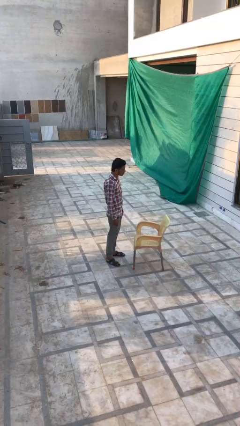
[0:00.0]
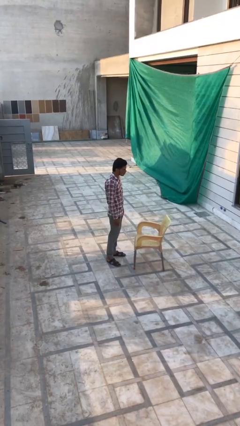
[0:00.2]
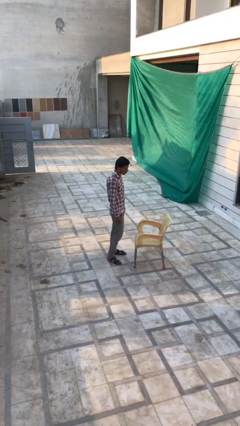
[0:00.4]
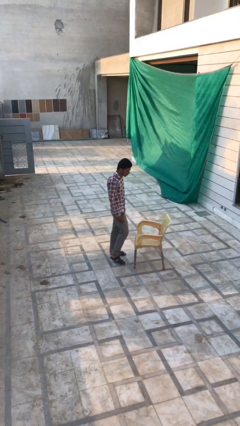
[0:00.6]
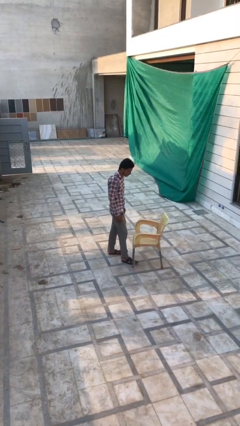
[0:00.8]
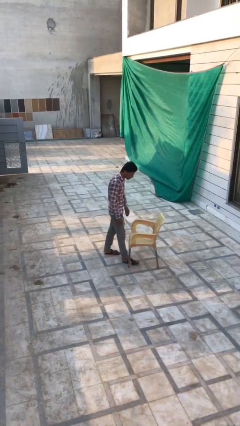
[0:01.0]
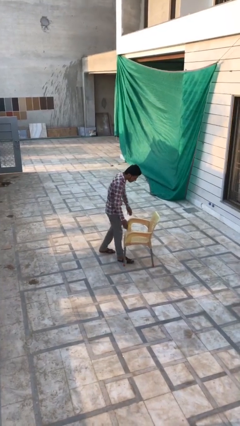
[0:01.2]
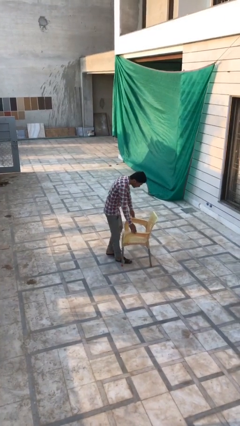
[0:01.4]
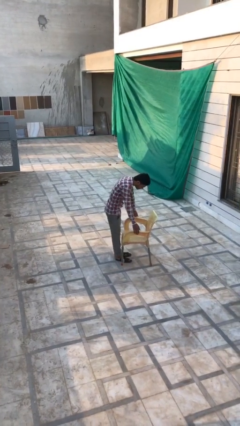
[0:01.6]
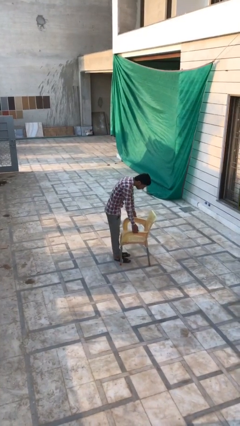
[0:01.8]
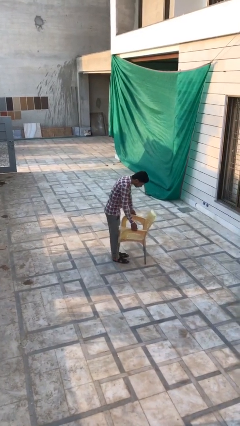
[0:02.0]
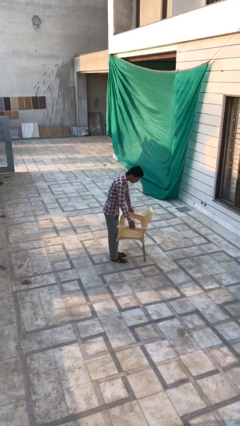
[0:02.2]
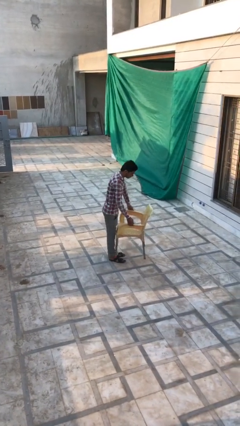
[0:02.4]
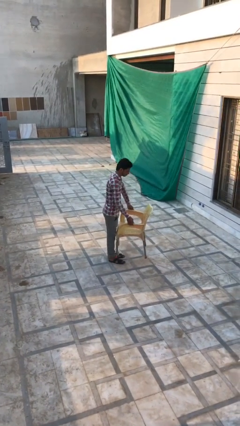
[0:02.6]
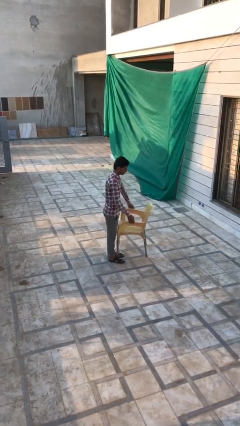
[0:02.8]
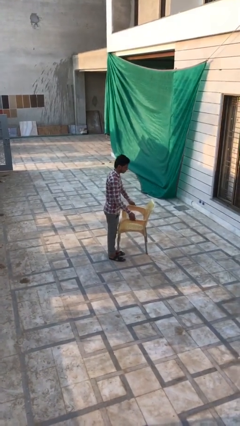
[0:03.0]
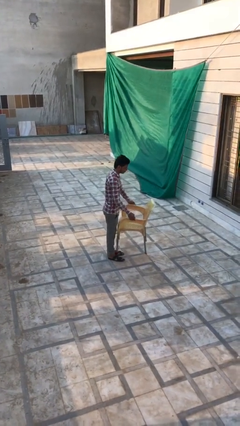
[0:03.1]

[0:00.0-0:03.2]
person picks up object from floor

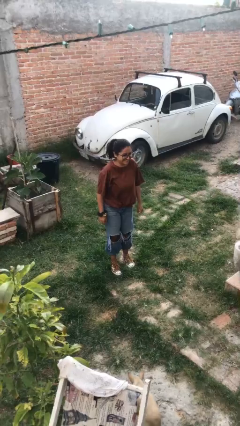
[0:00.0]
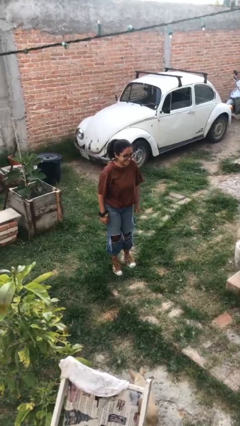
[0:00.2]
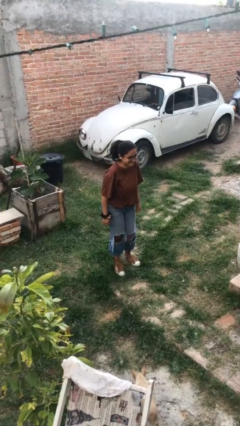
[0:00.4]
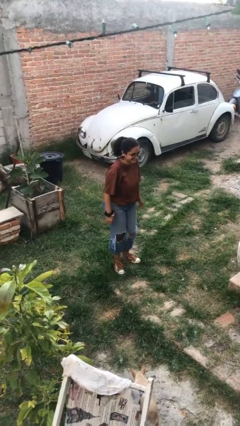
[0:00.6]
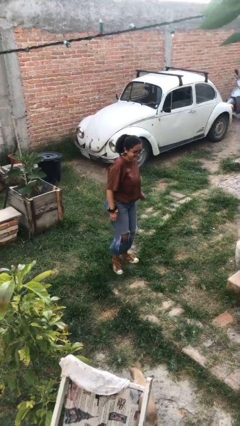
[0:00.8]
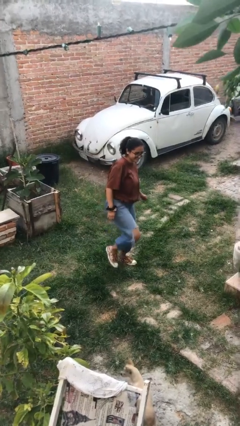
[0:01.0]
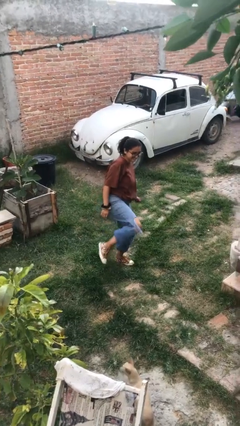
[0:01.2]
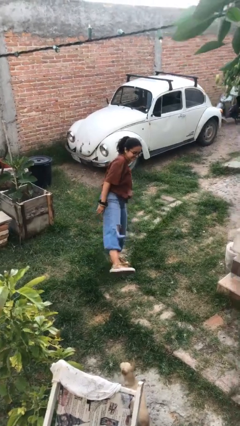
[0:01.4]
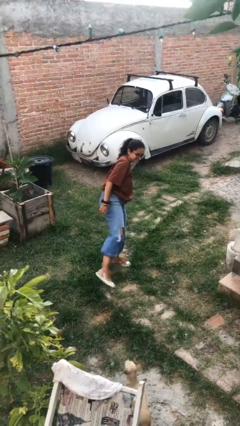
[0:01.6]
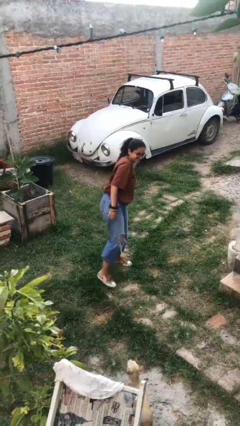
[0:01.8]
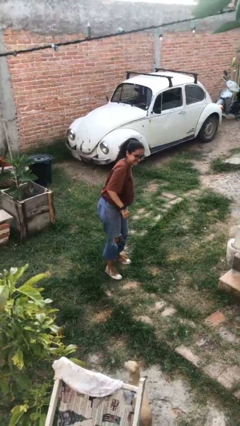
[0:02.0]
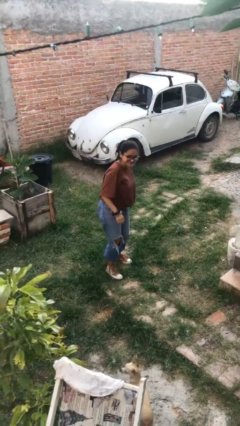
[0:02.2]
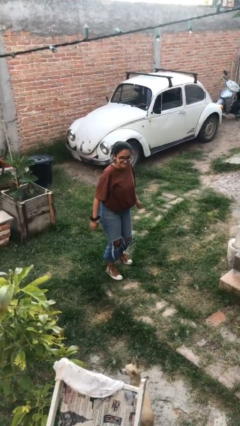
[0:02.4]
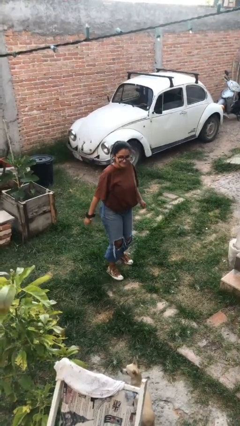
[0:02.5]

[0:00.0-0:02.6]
person karate kicks

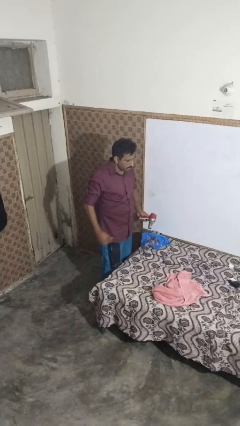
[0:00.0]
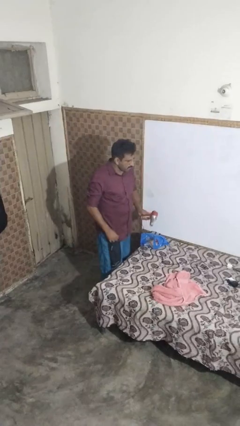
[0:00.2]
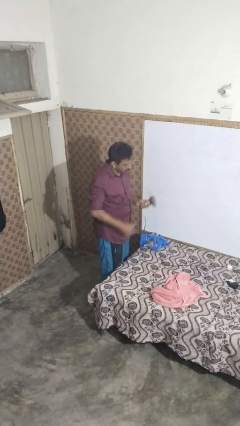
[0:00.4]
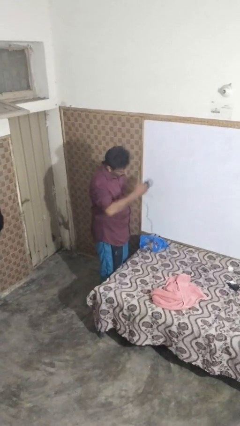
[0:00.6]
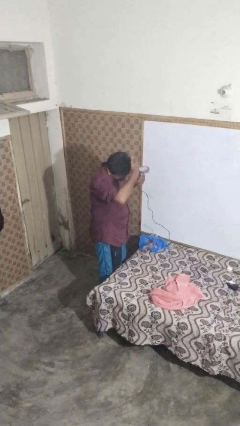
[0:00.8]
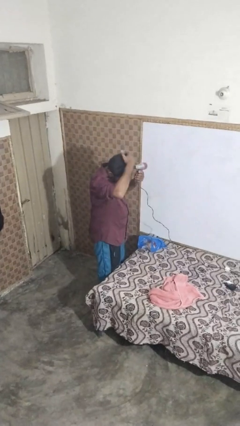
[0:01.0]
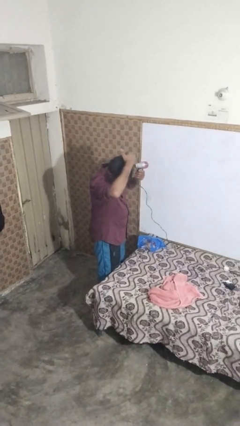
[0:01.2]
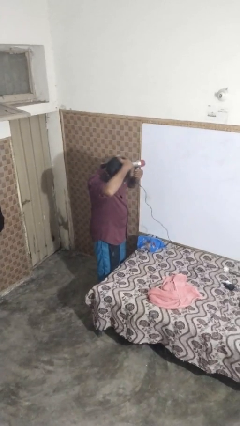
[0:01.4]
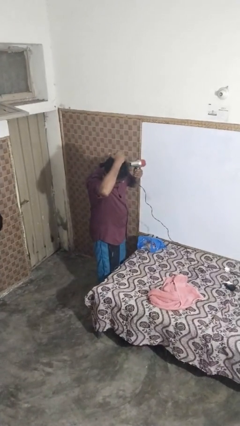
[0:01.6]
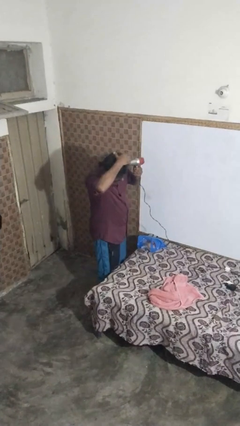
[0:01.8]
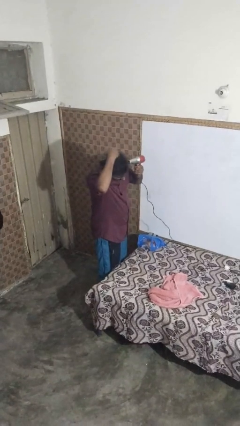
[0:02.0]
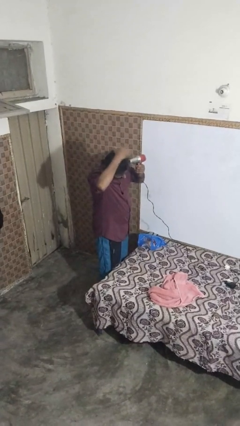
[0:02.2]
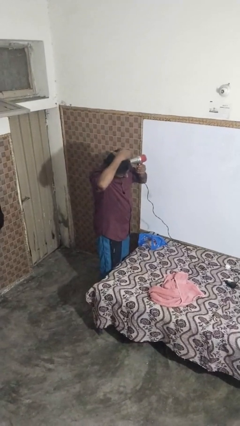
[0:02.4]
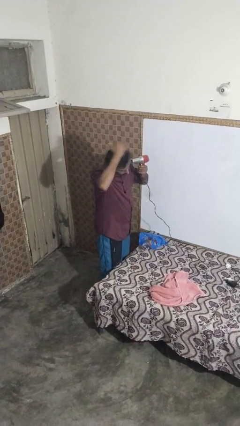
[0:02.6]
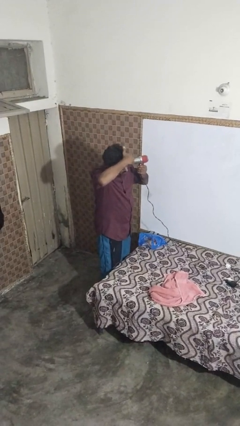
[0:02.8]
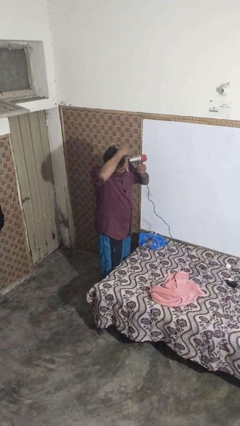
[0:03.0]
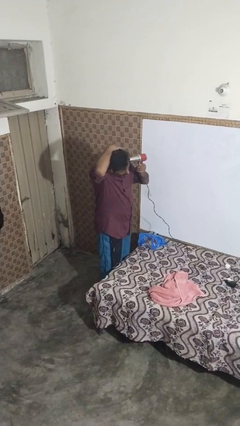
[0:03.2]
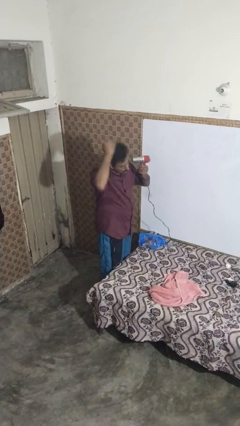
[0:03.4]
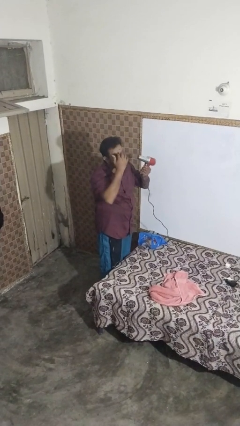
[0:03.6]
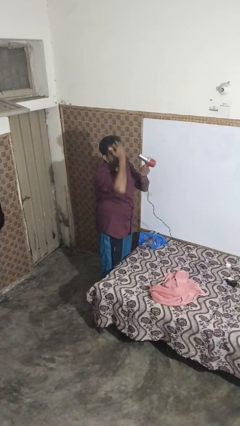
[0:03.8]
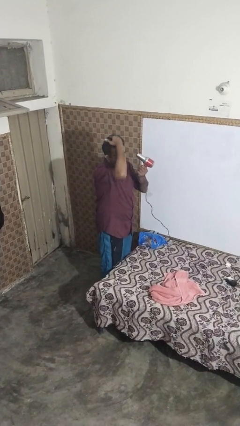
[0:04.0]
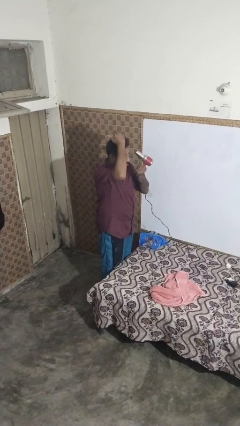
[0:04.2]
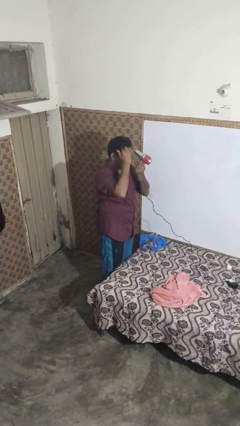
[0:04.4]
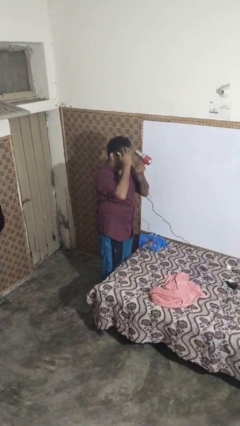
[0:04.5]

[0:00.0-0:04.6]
person dries hair with hairdryer

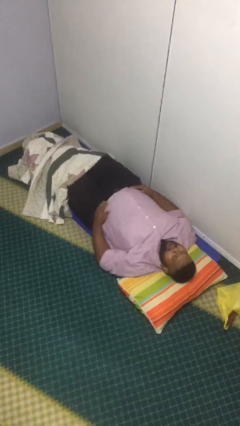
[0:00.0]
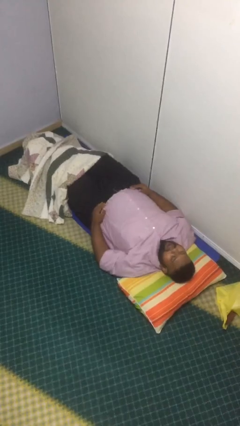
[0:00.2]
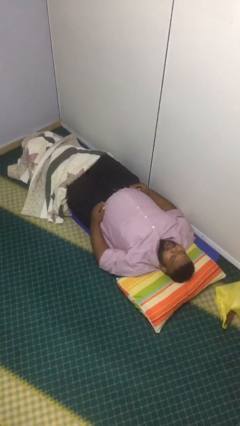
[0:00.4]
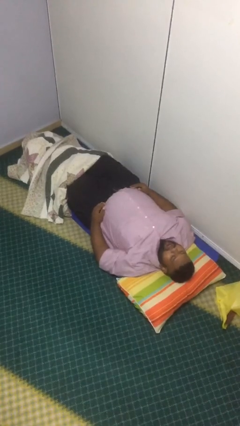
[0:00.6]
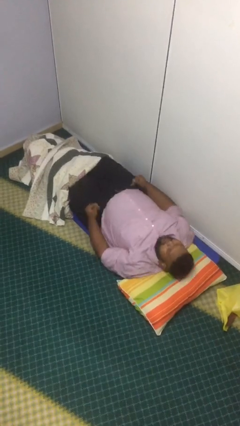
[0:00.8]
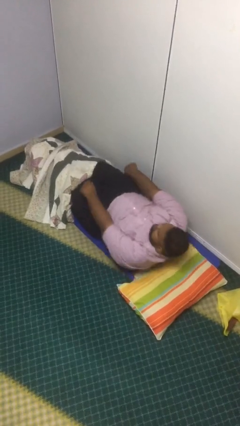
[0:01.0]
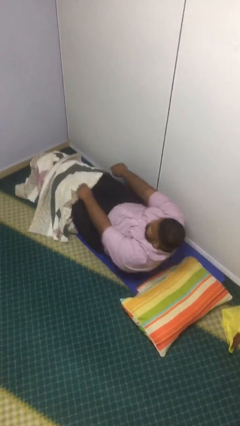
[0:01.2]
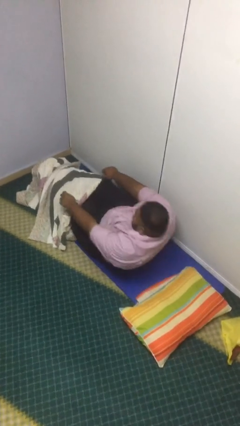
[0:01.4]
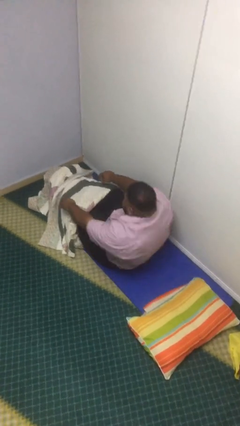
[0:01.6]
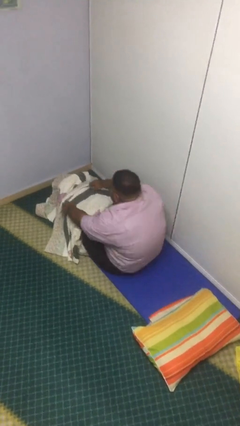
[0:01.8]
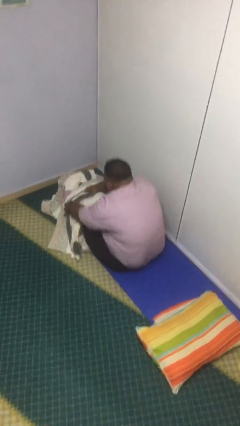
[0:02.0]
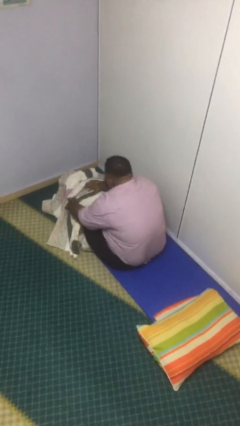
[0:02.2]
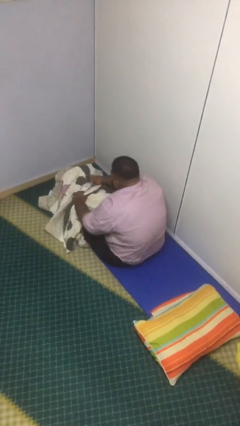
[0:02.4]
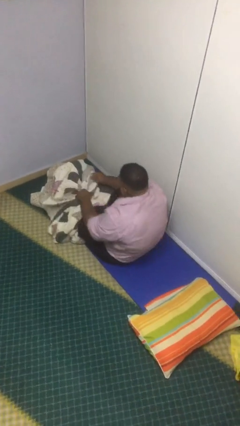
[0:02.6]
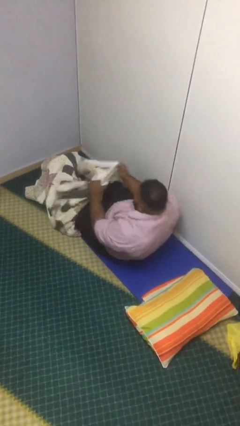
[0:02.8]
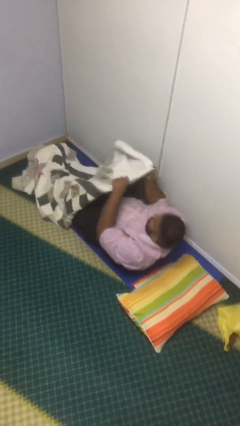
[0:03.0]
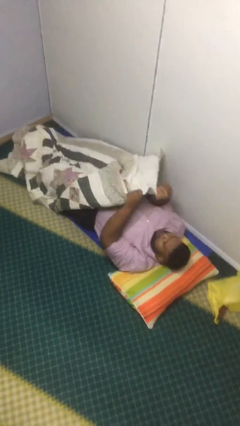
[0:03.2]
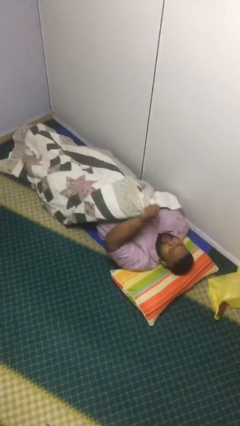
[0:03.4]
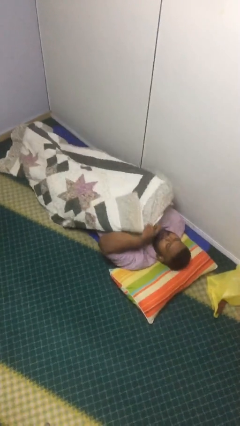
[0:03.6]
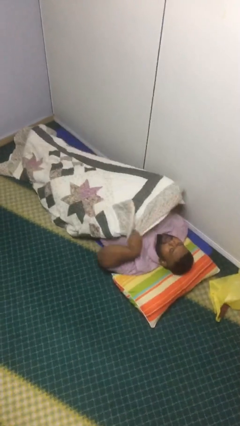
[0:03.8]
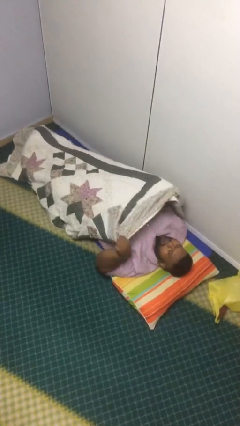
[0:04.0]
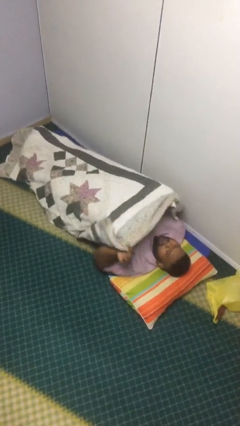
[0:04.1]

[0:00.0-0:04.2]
person covers with bedsheets

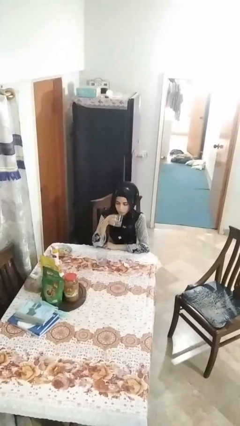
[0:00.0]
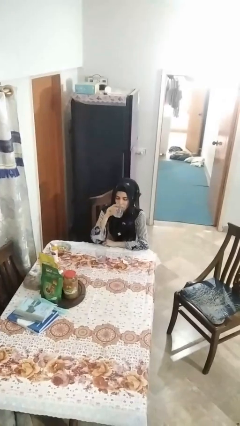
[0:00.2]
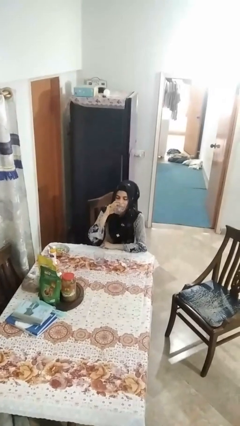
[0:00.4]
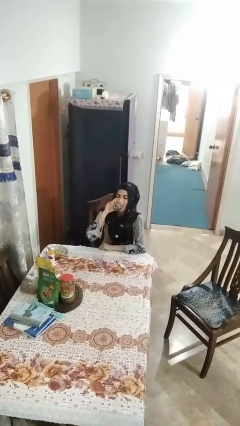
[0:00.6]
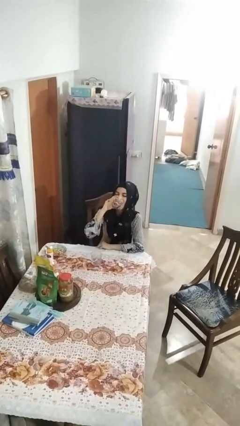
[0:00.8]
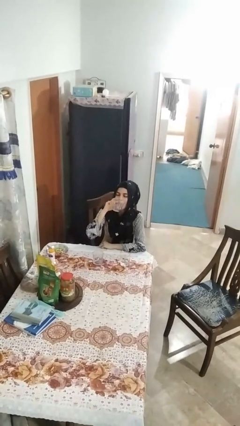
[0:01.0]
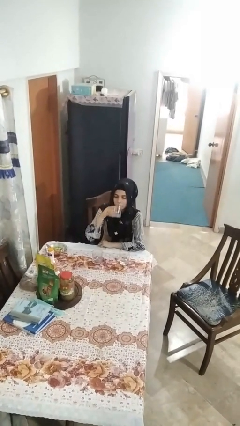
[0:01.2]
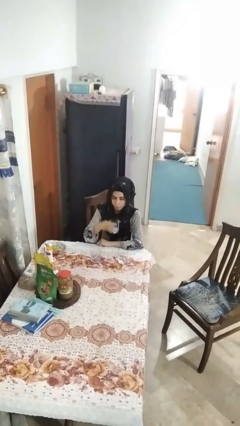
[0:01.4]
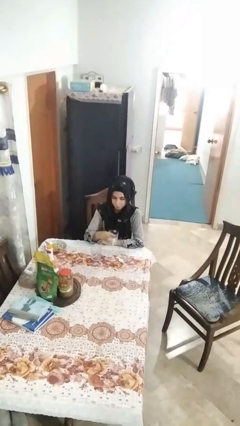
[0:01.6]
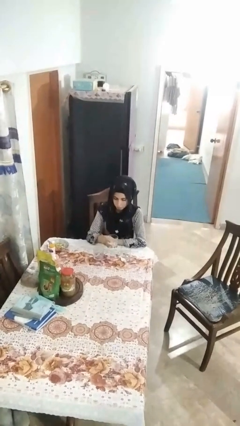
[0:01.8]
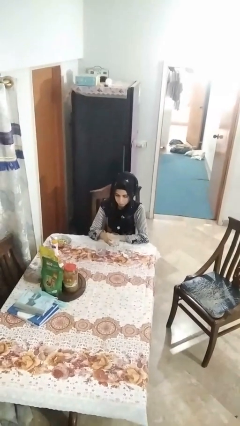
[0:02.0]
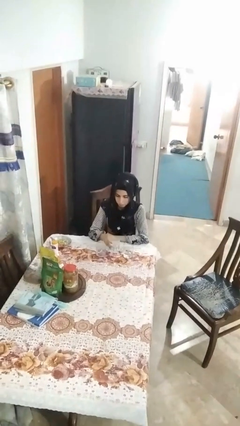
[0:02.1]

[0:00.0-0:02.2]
person drinks from shotglass

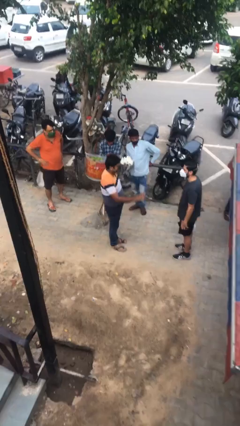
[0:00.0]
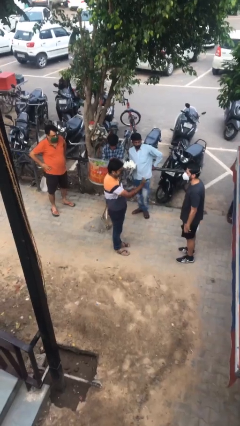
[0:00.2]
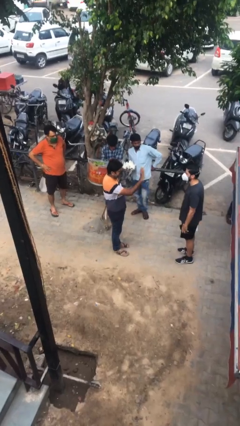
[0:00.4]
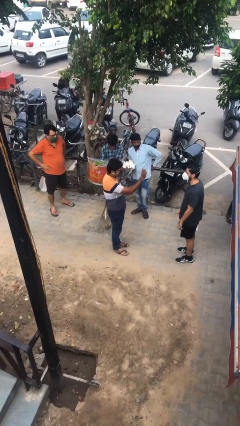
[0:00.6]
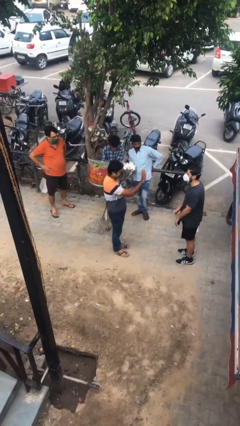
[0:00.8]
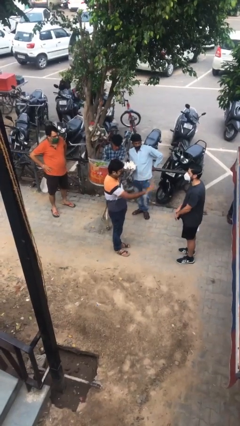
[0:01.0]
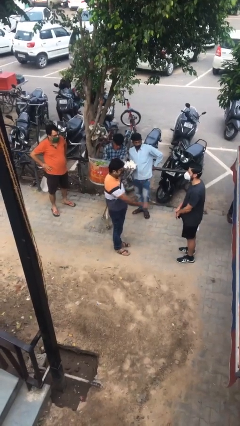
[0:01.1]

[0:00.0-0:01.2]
person waves at person
